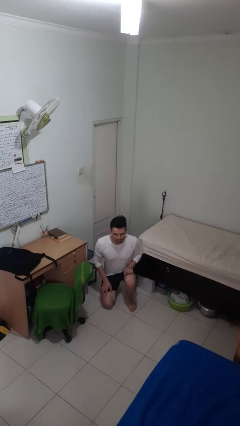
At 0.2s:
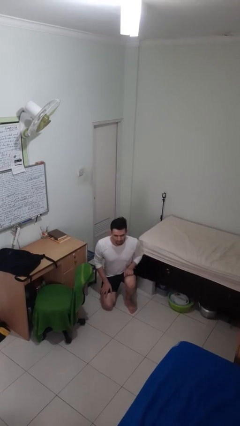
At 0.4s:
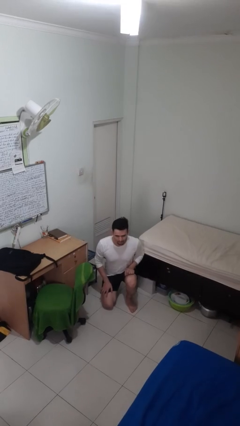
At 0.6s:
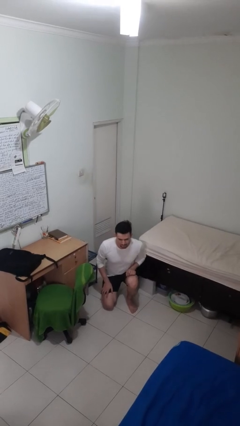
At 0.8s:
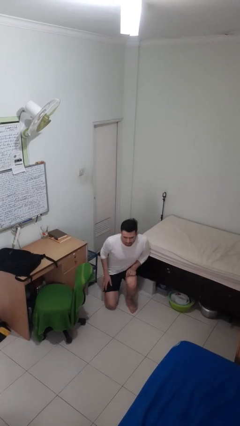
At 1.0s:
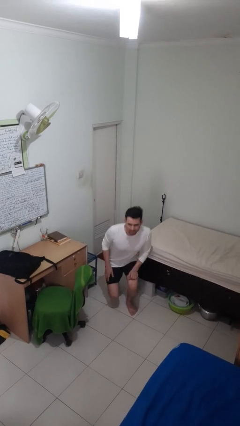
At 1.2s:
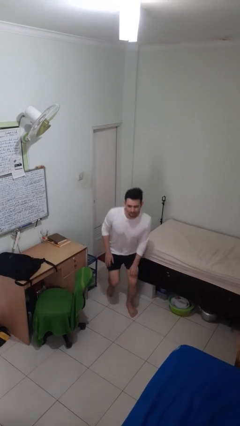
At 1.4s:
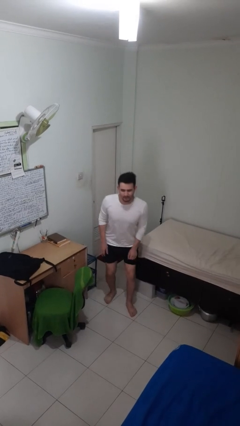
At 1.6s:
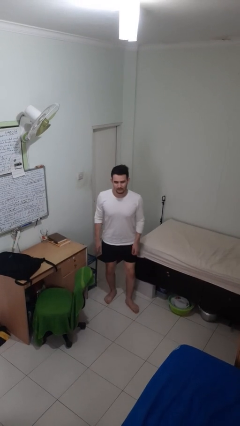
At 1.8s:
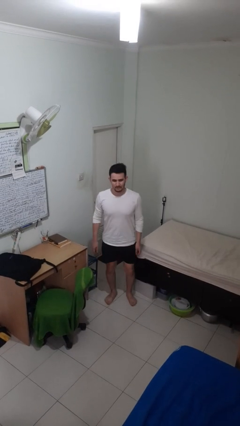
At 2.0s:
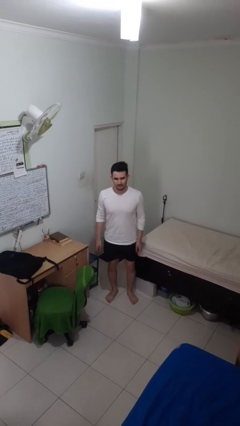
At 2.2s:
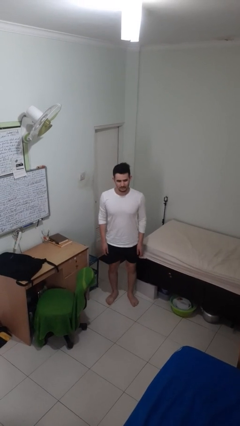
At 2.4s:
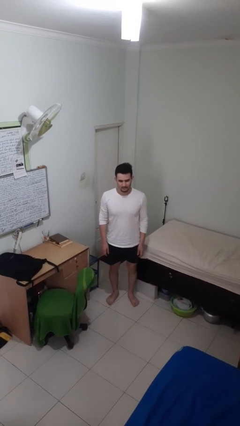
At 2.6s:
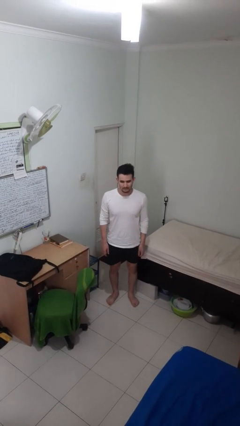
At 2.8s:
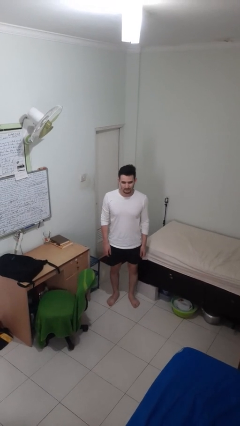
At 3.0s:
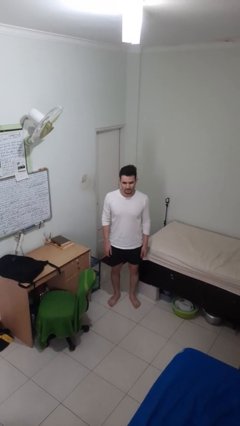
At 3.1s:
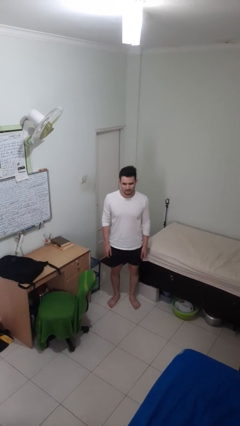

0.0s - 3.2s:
person stands up from floor

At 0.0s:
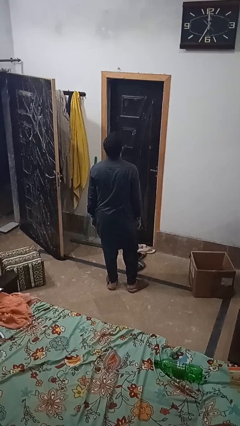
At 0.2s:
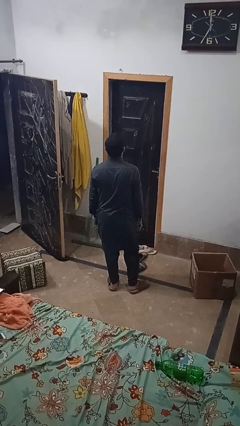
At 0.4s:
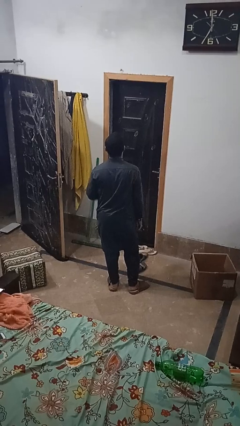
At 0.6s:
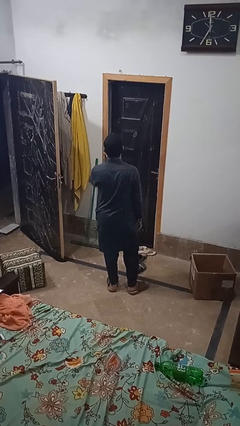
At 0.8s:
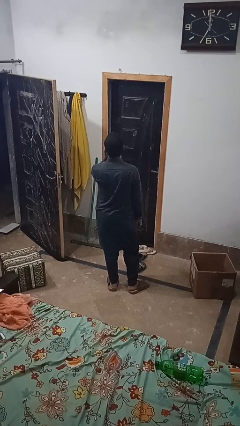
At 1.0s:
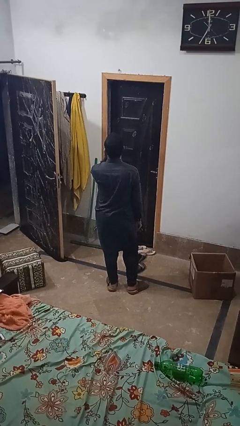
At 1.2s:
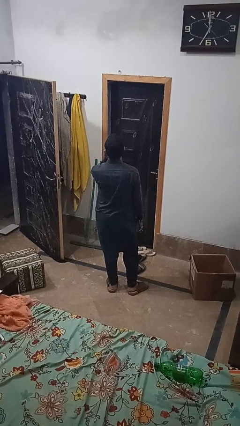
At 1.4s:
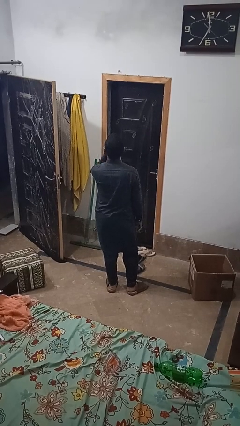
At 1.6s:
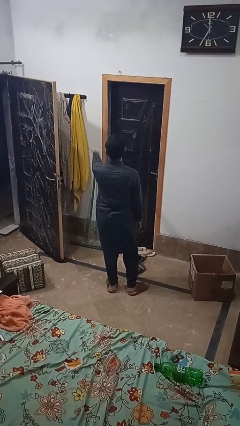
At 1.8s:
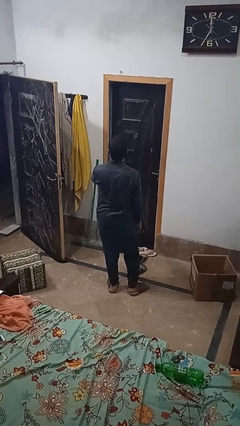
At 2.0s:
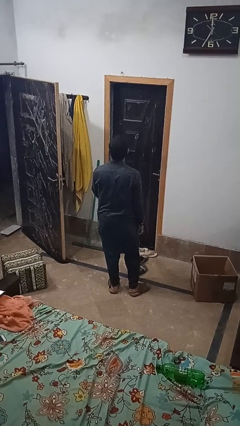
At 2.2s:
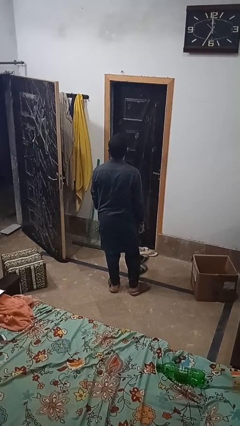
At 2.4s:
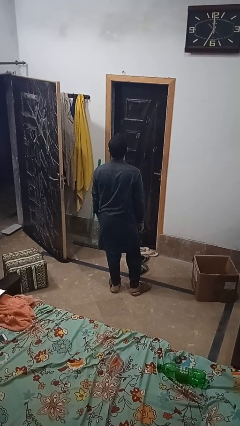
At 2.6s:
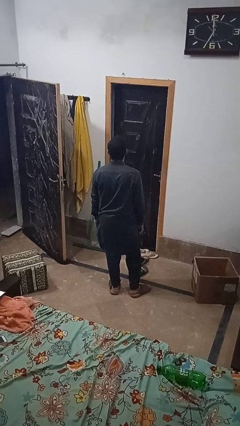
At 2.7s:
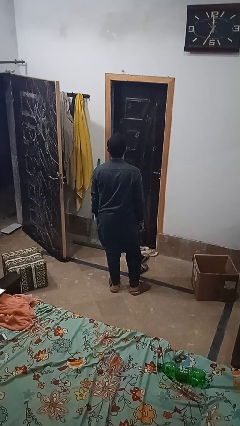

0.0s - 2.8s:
person gestures blow kiss

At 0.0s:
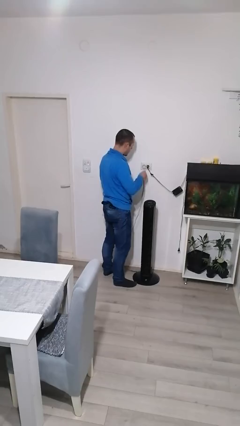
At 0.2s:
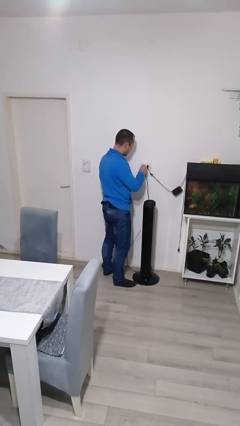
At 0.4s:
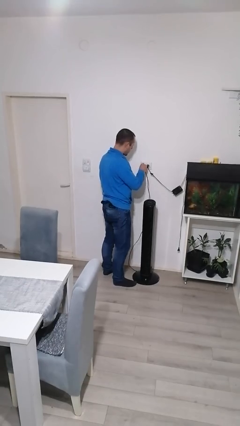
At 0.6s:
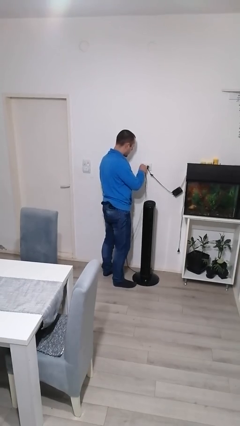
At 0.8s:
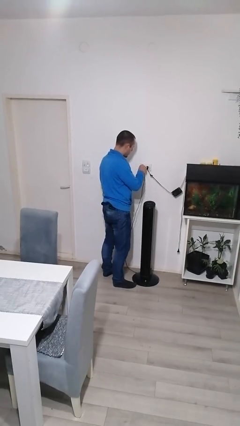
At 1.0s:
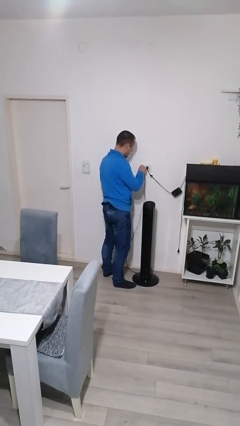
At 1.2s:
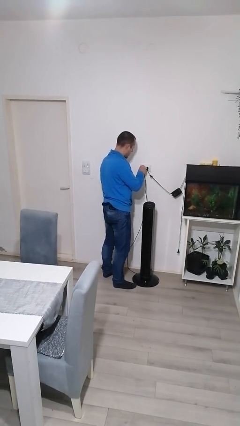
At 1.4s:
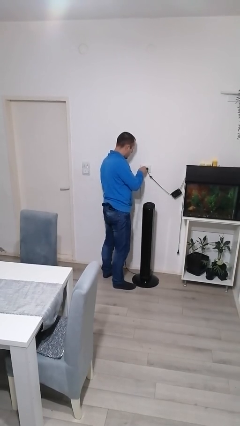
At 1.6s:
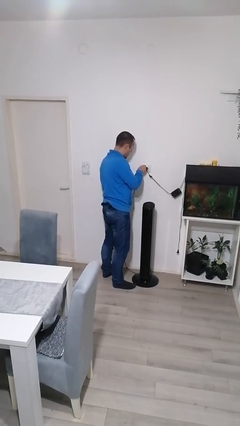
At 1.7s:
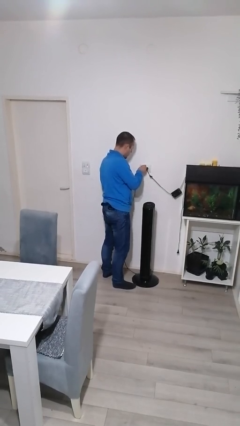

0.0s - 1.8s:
person plugs into electrical socket

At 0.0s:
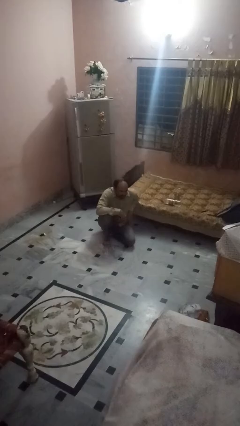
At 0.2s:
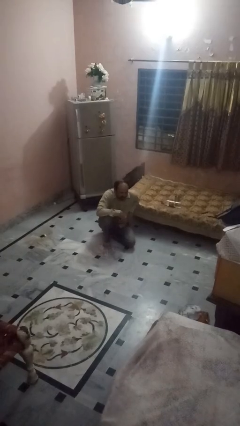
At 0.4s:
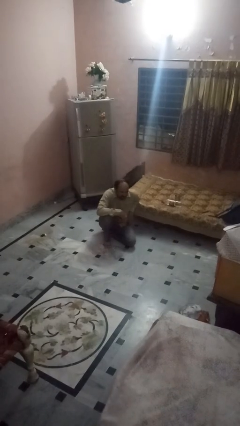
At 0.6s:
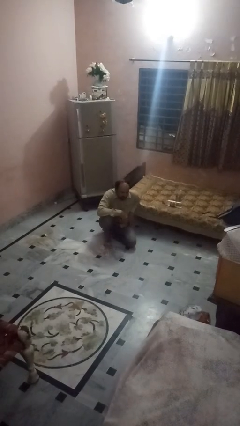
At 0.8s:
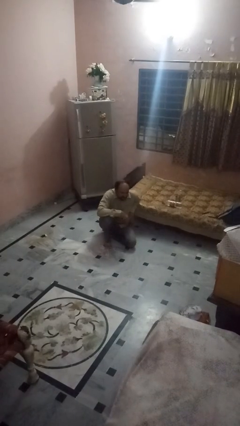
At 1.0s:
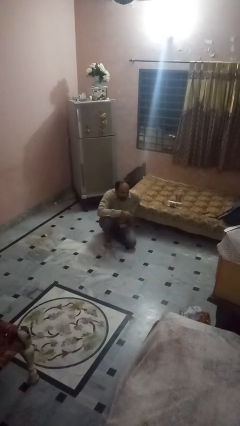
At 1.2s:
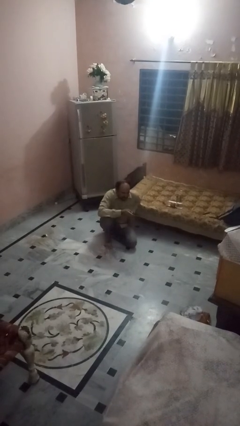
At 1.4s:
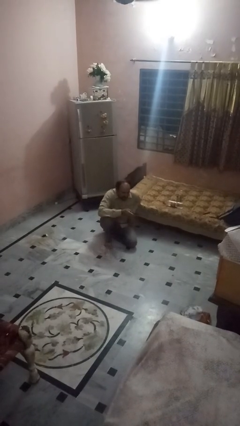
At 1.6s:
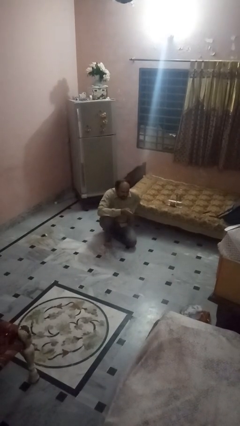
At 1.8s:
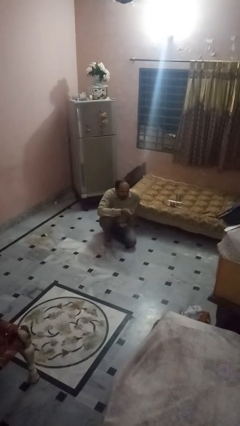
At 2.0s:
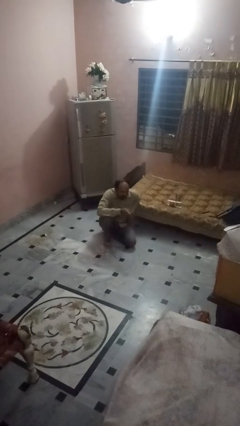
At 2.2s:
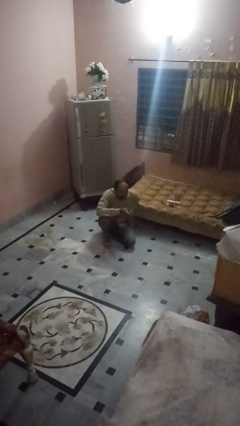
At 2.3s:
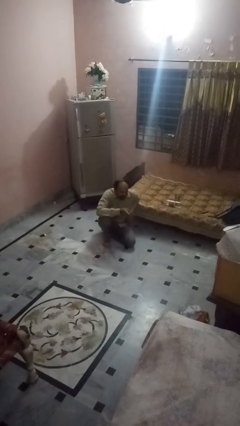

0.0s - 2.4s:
person uses television remote

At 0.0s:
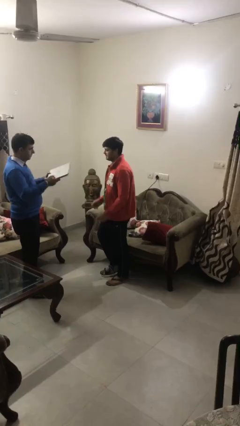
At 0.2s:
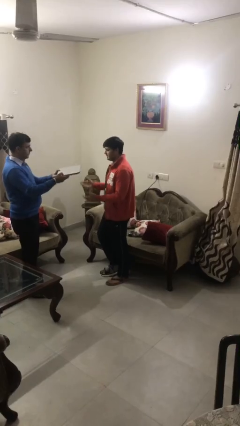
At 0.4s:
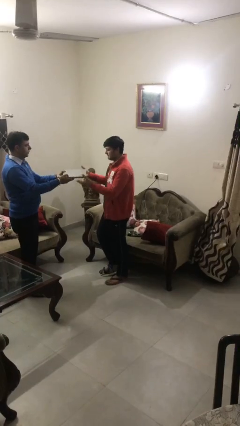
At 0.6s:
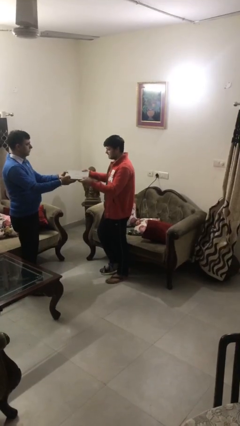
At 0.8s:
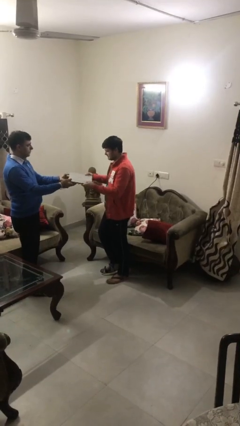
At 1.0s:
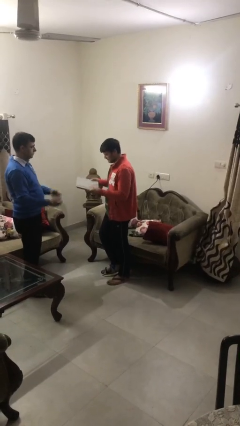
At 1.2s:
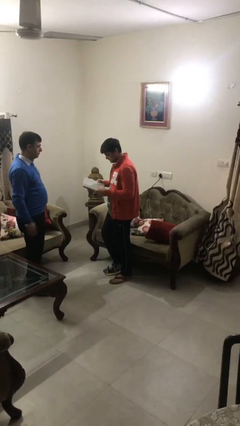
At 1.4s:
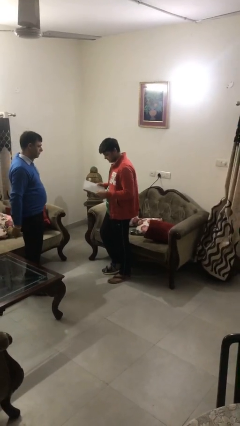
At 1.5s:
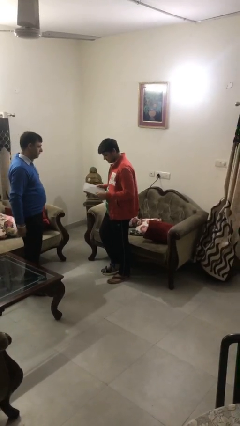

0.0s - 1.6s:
person transfers object to person

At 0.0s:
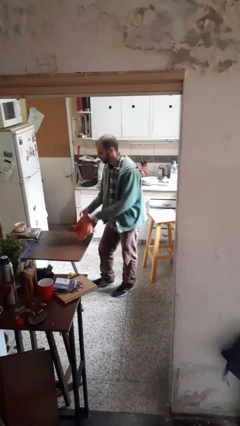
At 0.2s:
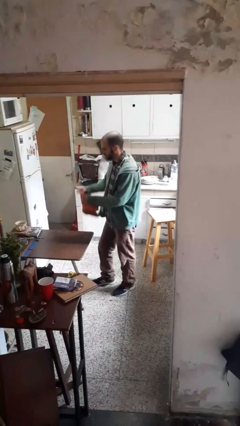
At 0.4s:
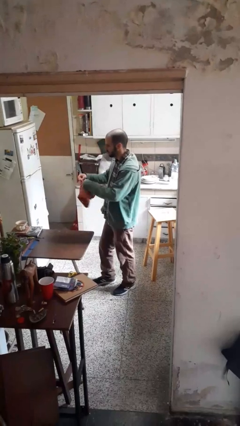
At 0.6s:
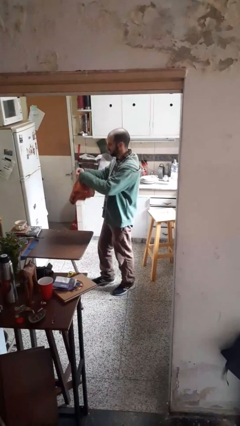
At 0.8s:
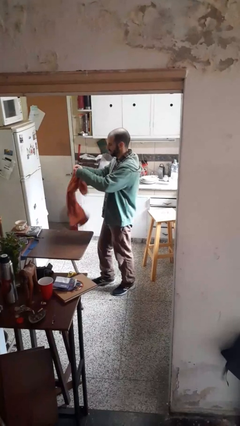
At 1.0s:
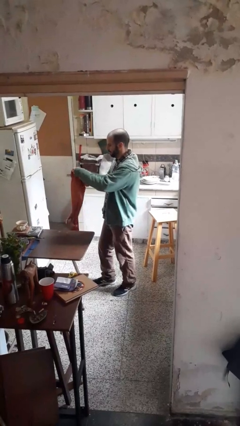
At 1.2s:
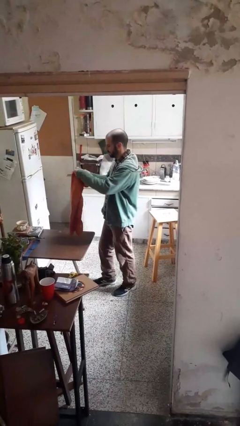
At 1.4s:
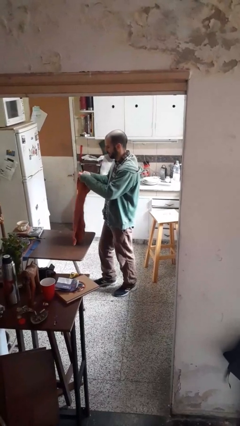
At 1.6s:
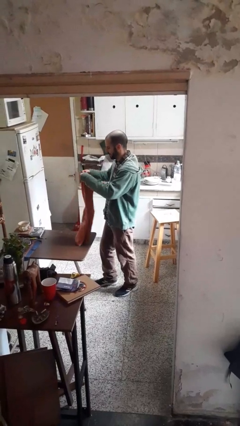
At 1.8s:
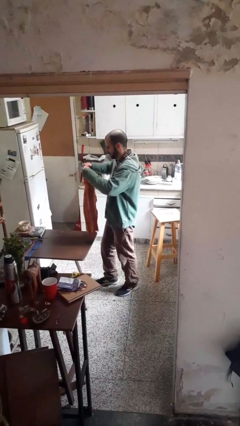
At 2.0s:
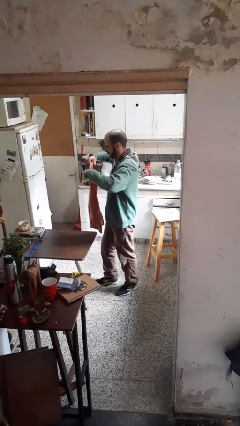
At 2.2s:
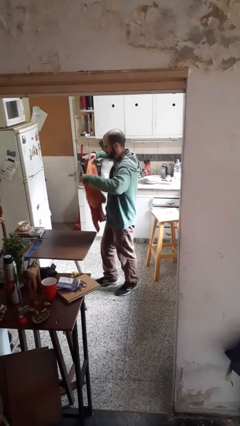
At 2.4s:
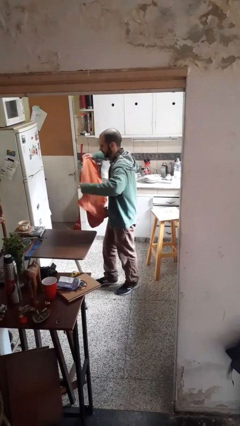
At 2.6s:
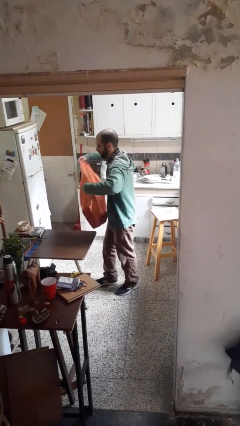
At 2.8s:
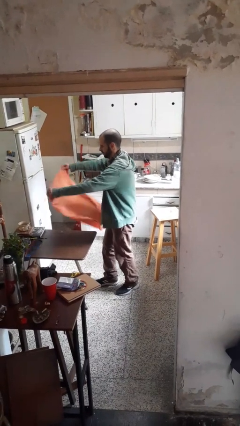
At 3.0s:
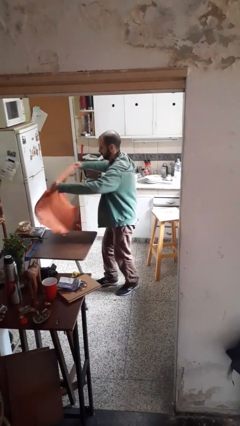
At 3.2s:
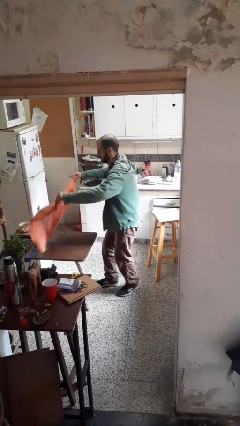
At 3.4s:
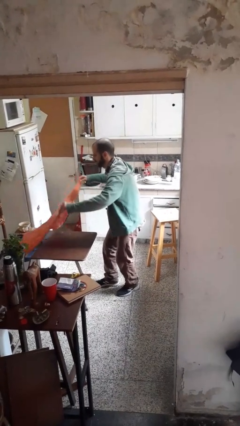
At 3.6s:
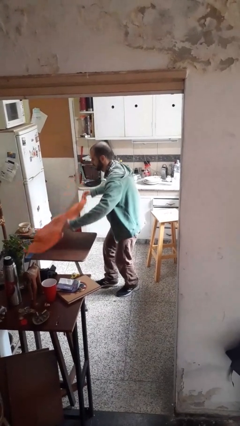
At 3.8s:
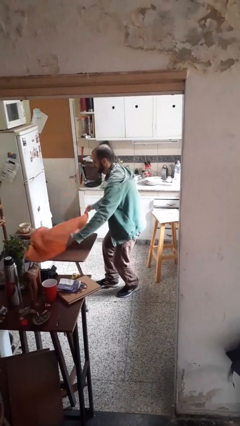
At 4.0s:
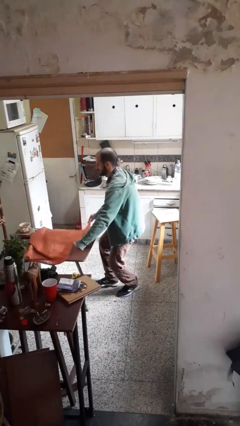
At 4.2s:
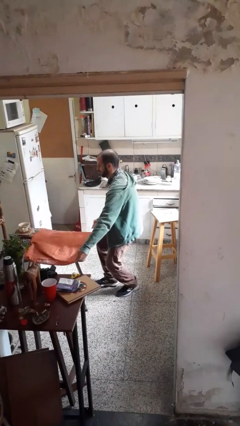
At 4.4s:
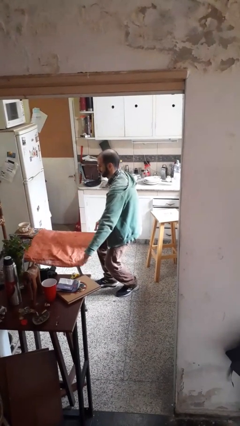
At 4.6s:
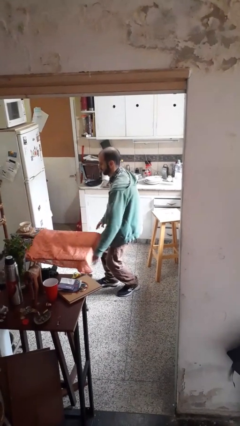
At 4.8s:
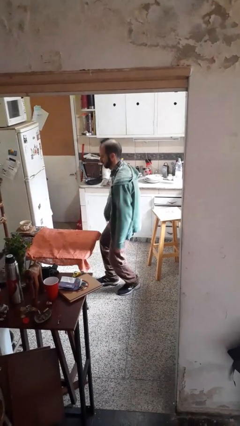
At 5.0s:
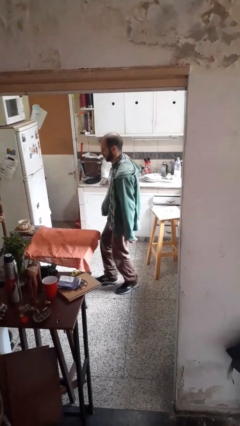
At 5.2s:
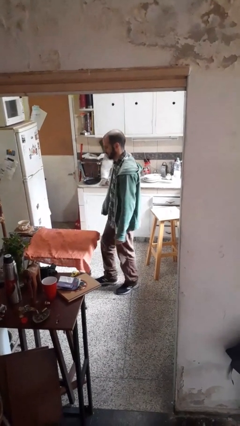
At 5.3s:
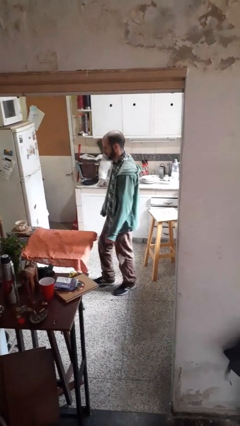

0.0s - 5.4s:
person spreads tablecloth

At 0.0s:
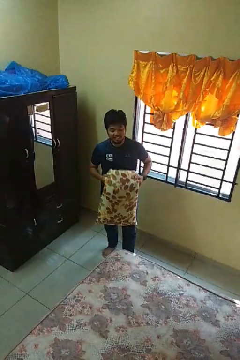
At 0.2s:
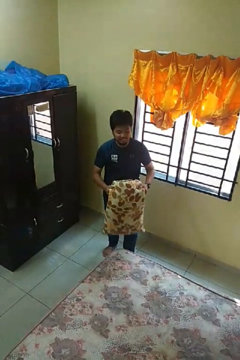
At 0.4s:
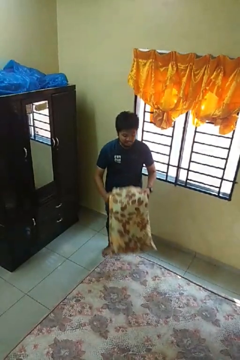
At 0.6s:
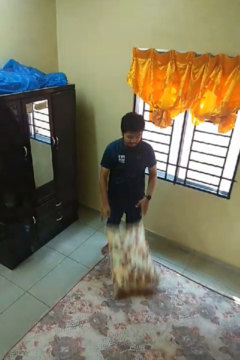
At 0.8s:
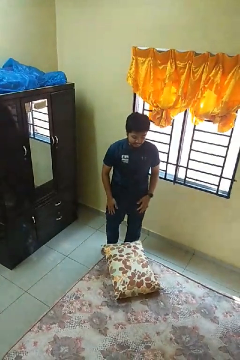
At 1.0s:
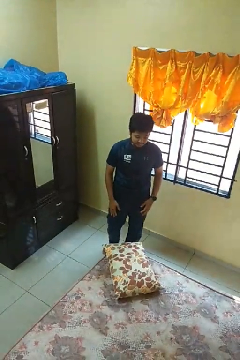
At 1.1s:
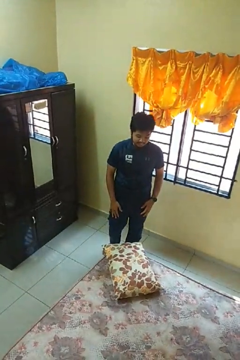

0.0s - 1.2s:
person puts down object on bed
